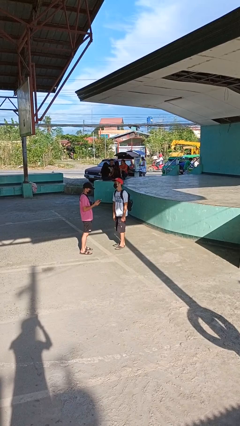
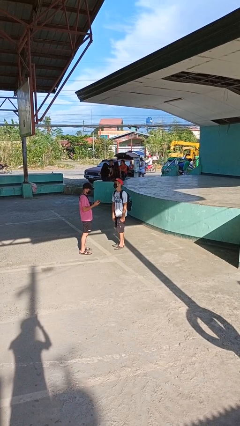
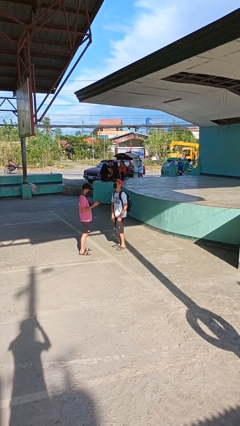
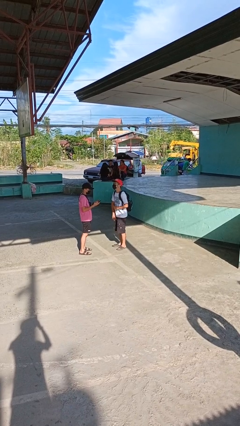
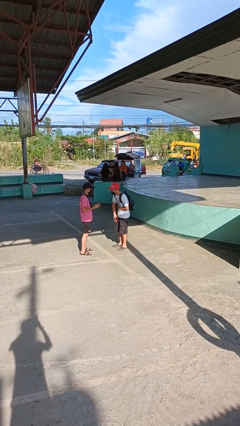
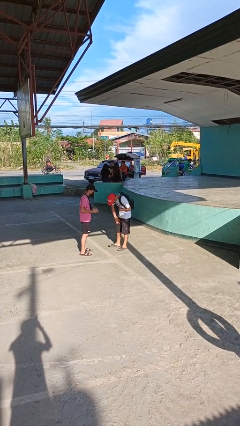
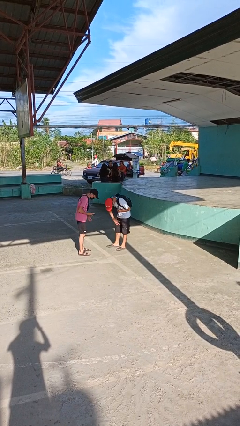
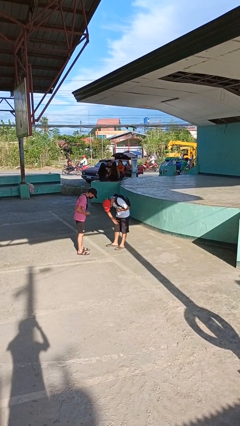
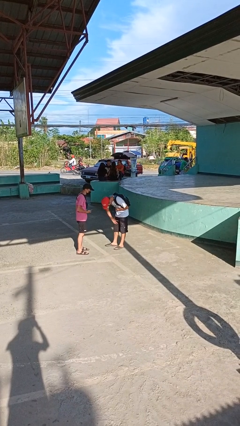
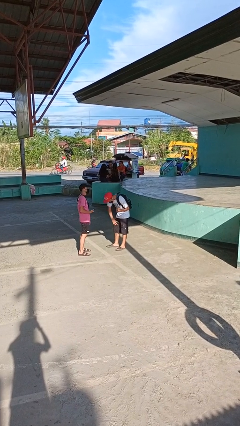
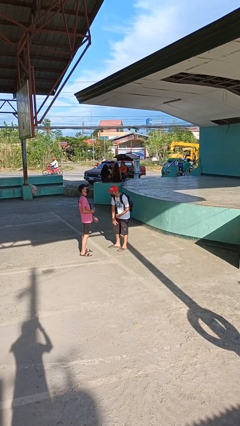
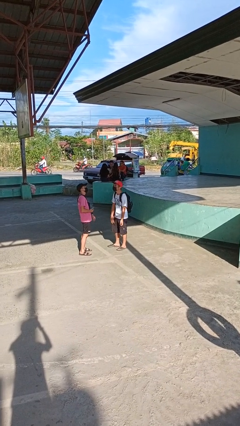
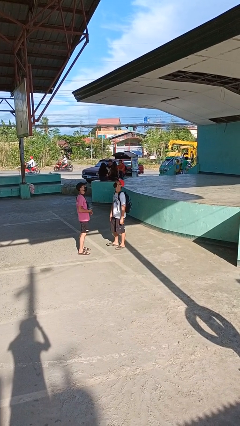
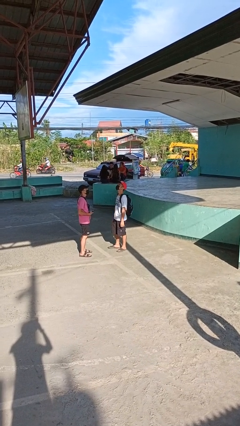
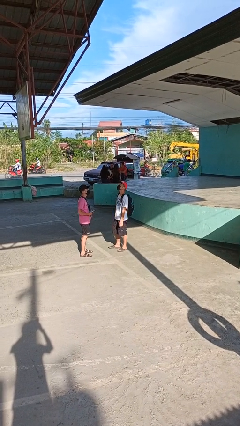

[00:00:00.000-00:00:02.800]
person laughs with person

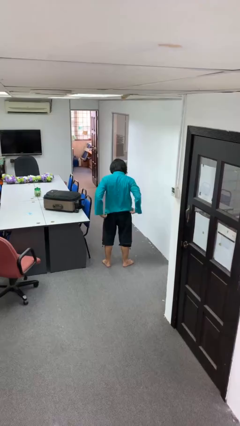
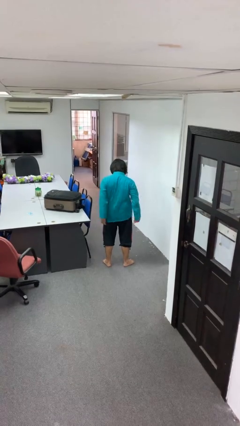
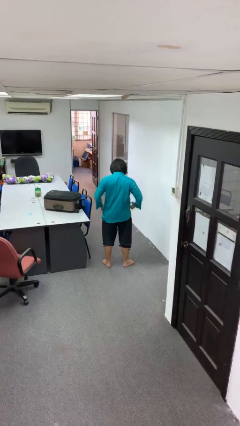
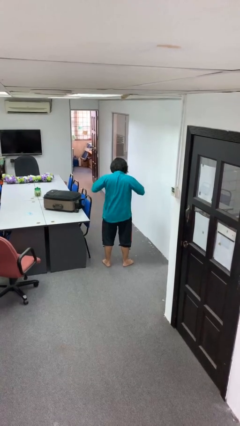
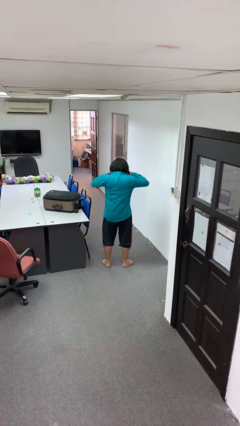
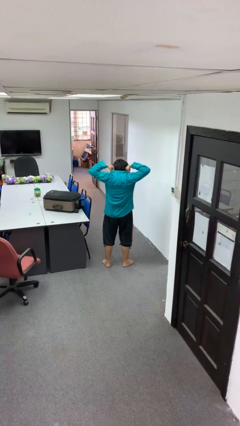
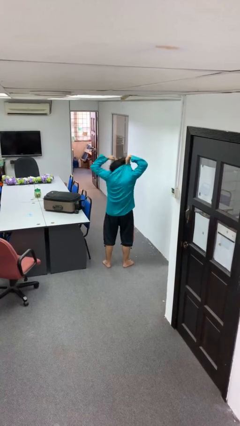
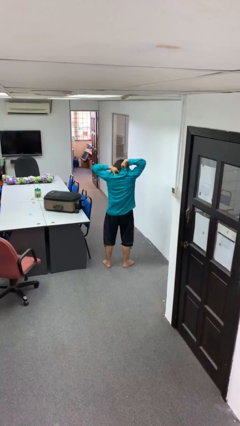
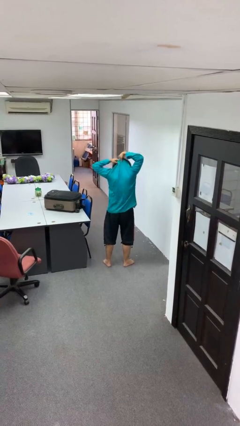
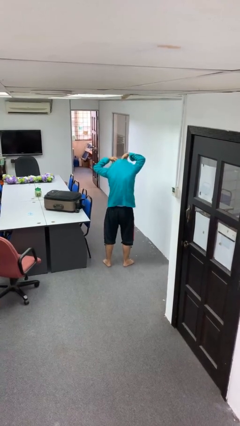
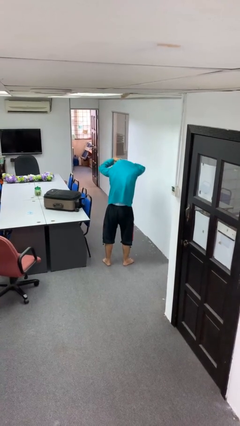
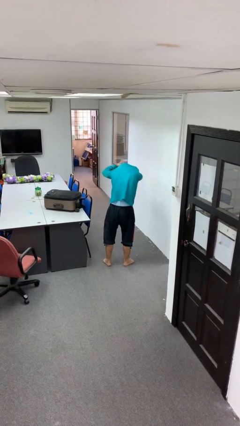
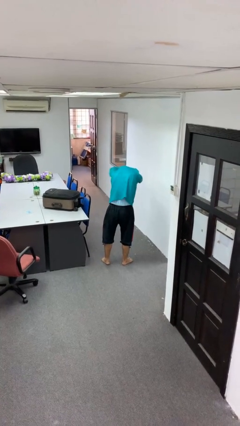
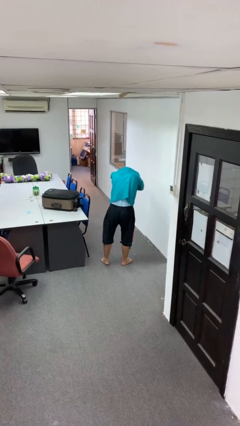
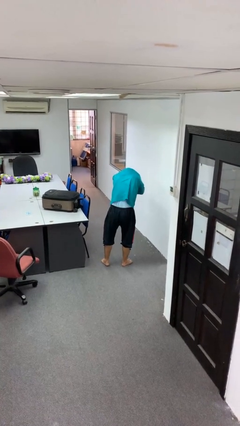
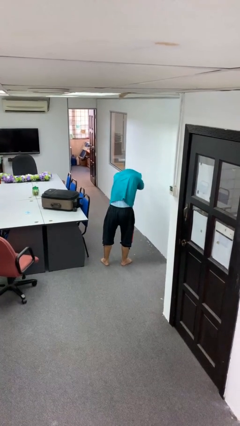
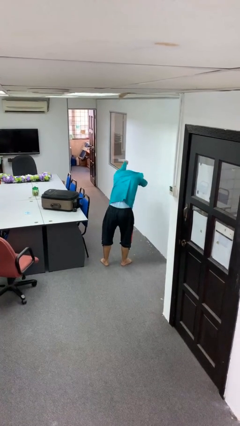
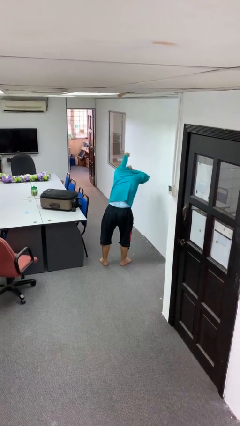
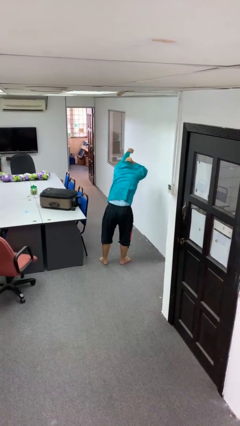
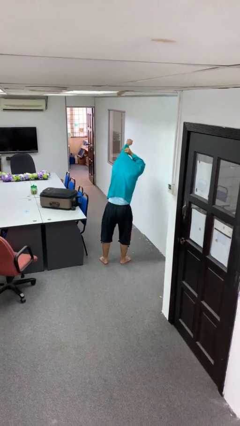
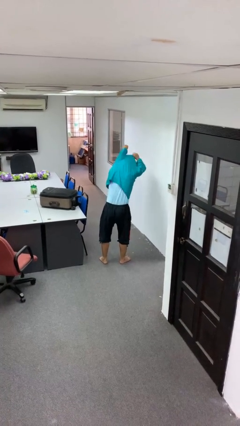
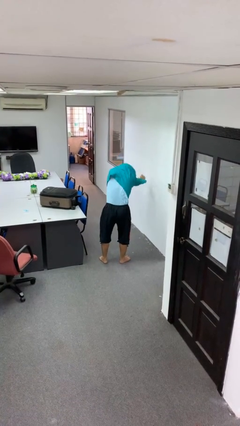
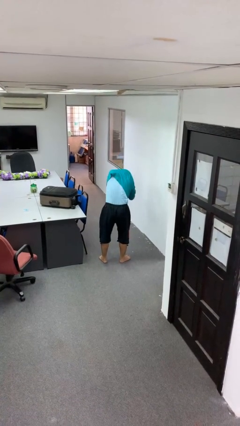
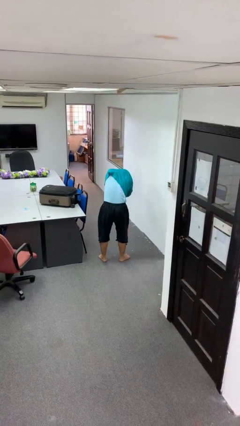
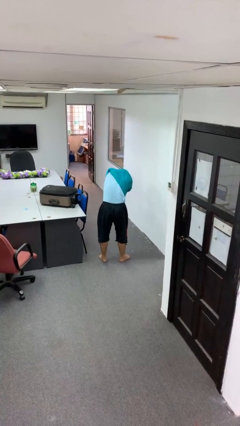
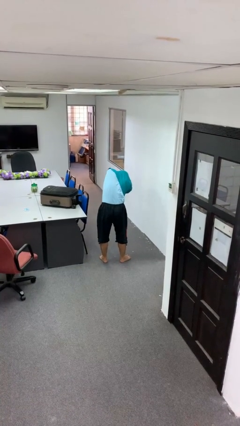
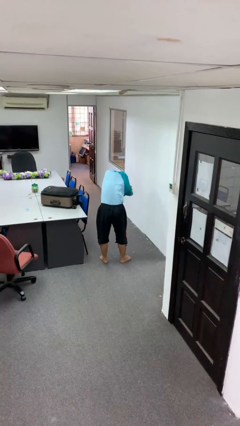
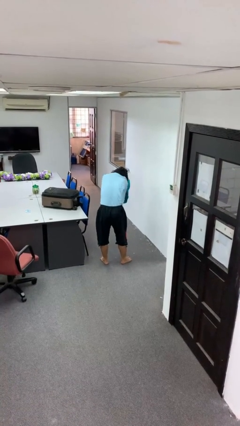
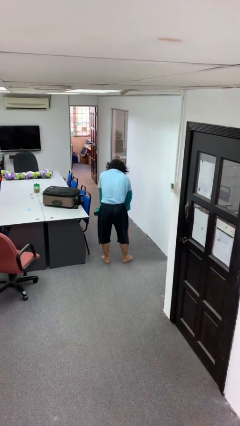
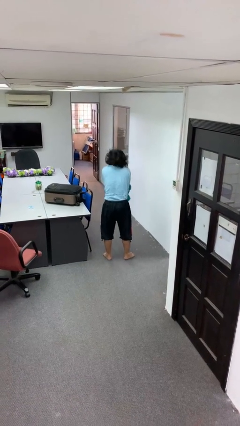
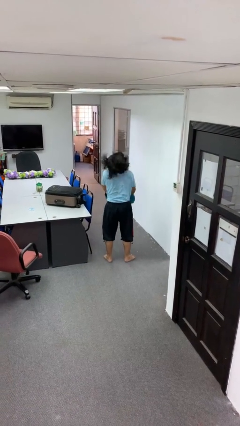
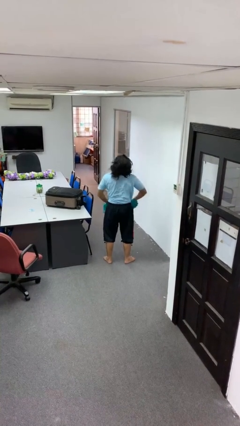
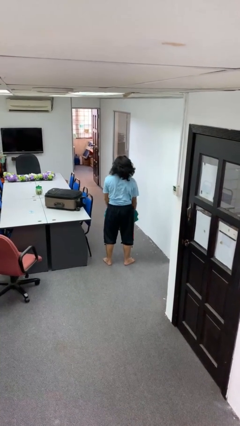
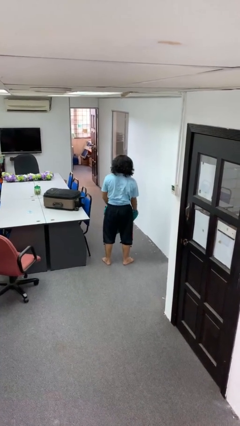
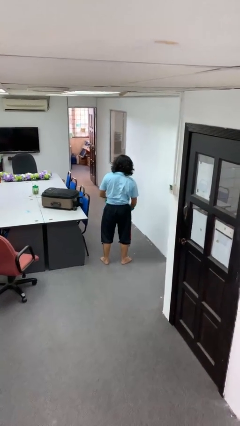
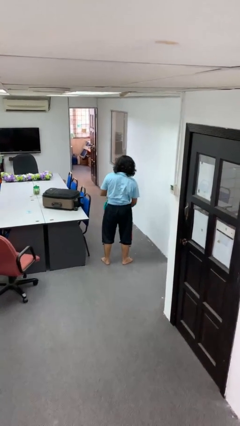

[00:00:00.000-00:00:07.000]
person takes off shirt

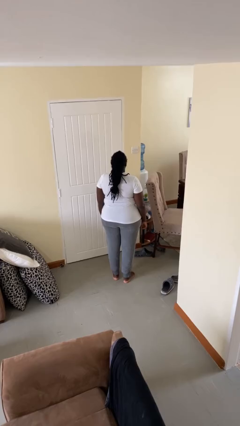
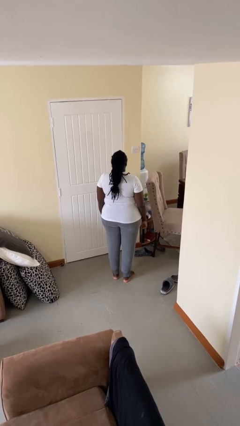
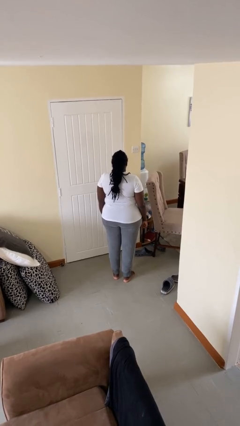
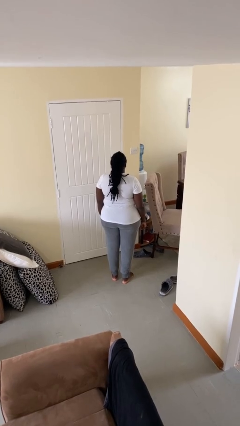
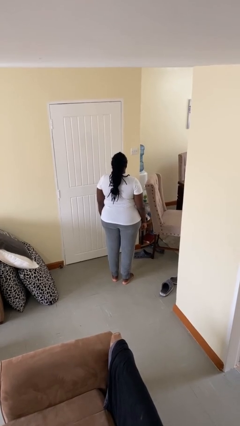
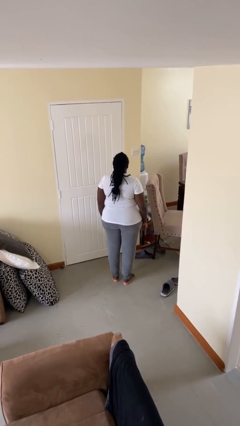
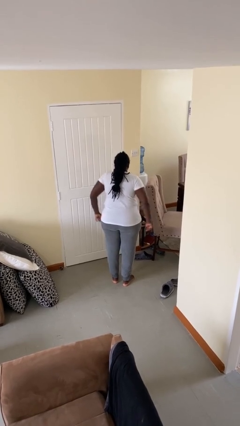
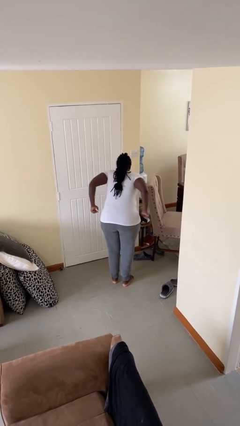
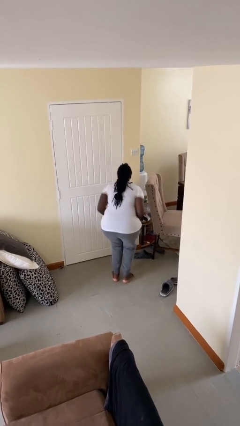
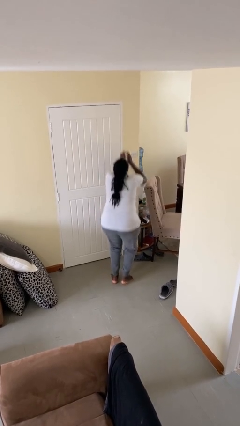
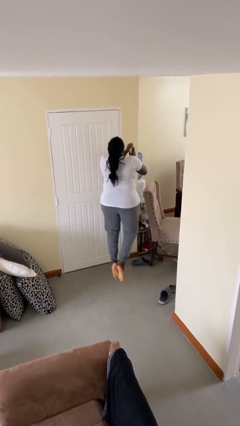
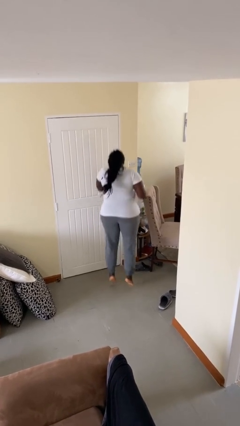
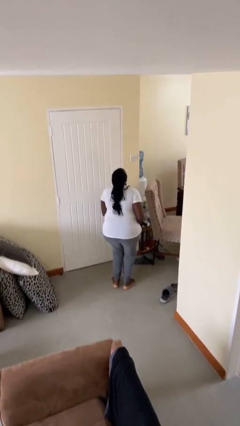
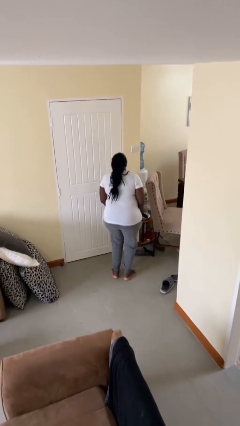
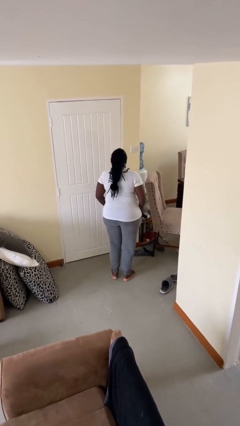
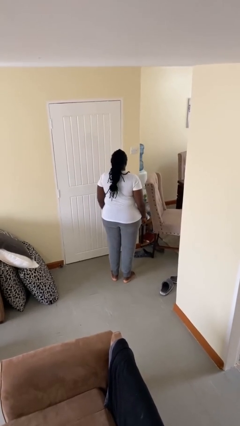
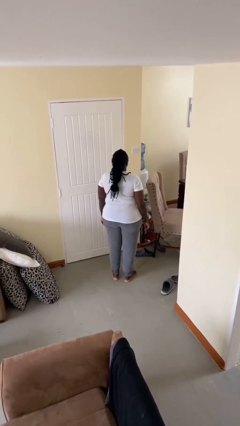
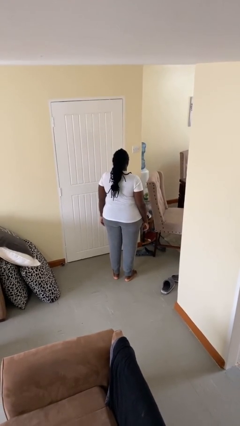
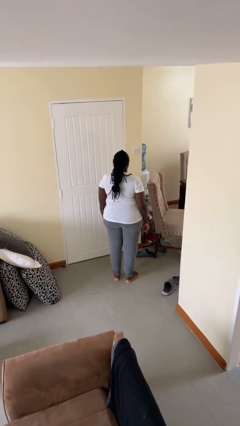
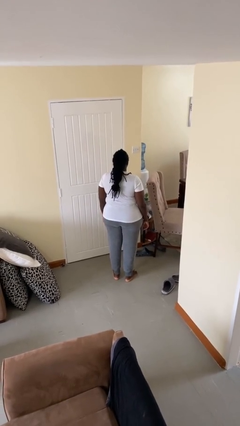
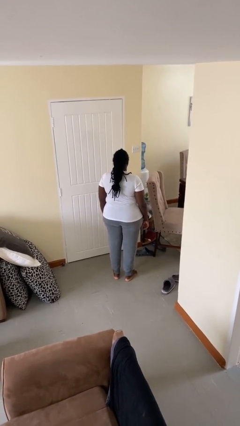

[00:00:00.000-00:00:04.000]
person jumps

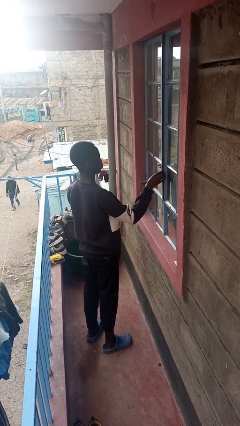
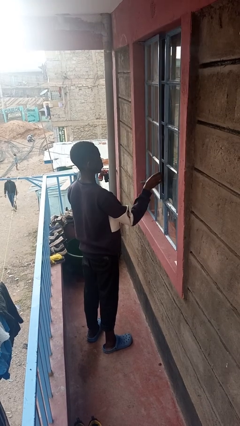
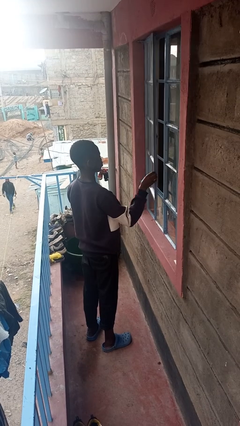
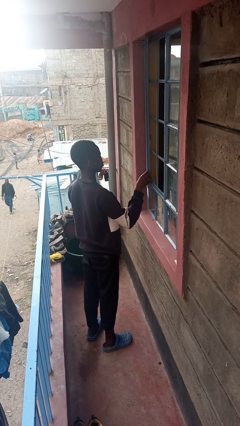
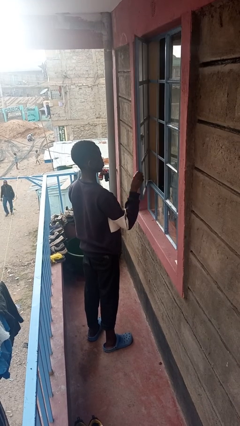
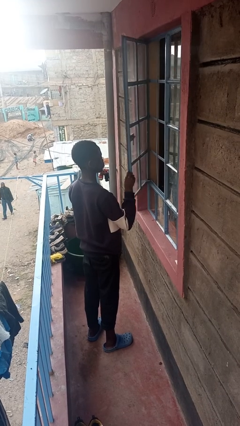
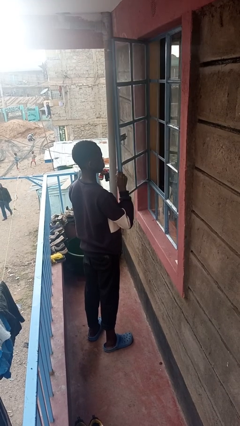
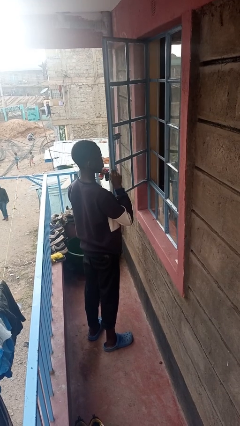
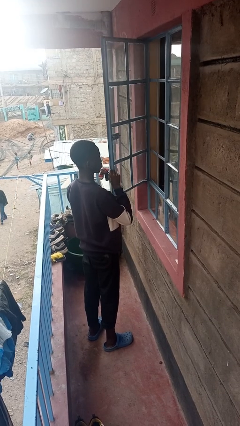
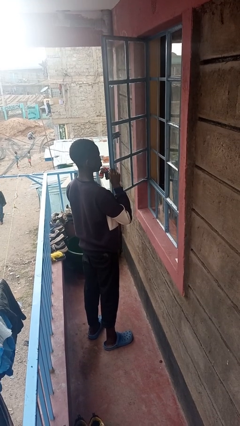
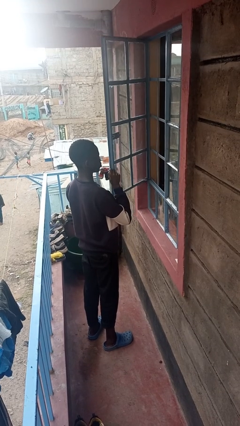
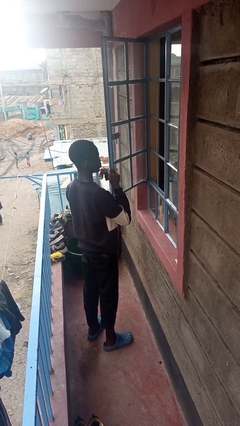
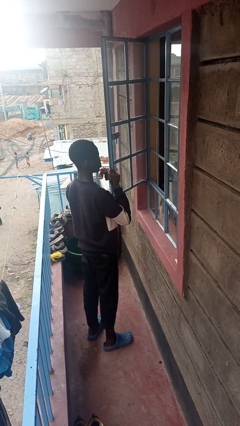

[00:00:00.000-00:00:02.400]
person opens home window

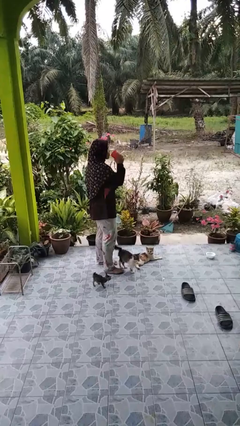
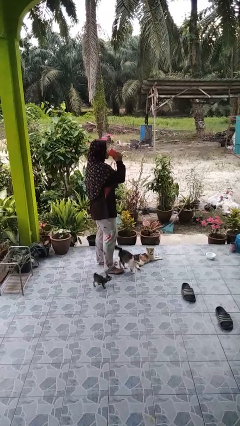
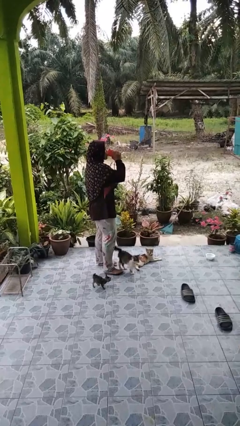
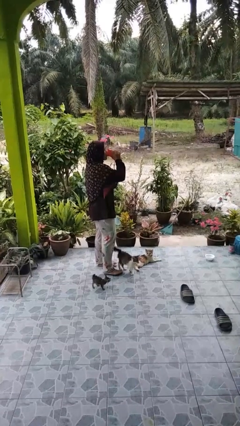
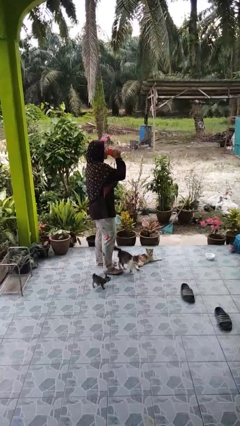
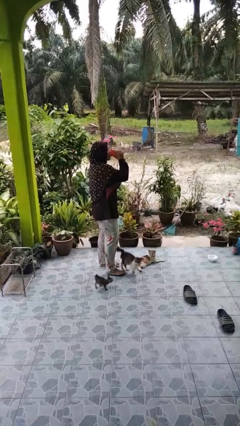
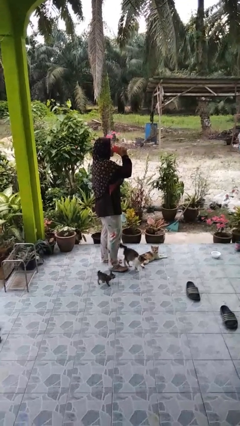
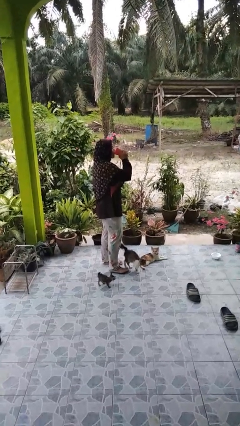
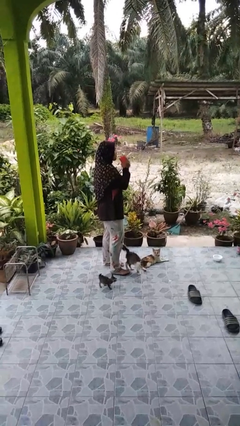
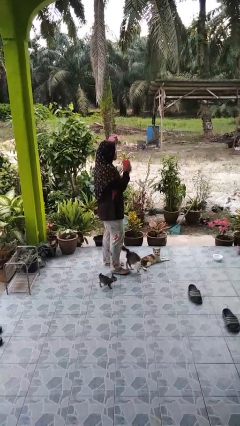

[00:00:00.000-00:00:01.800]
person drinks from bottle
